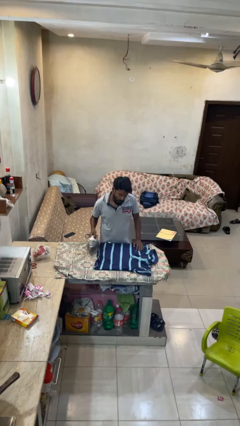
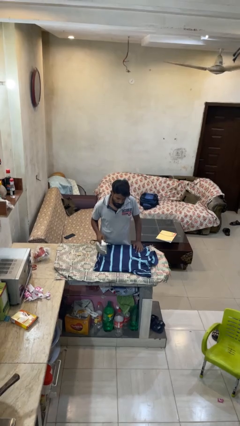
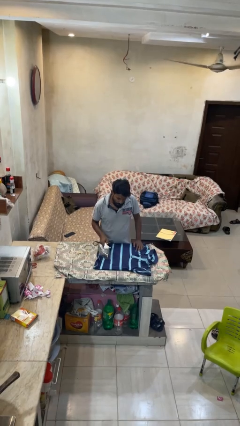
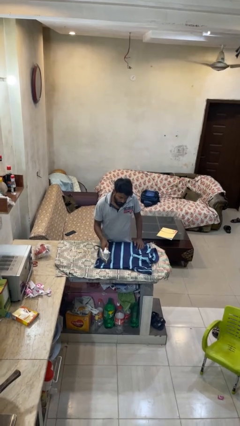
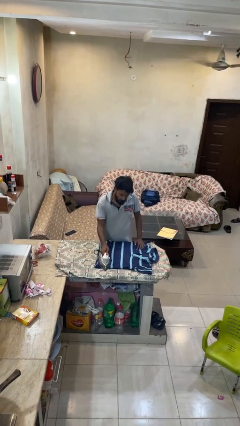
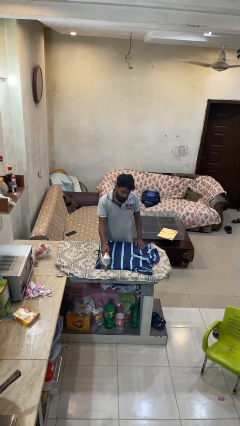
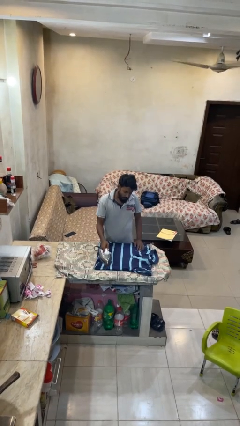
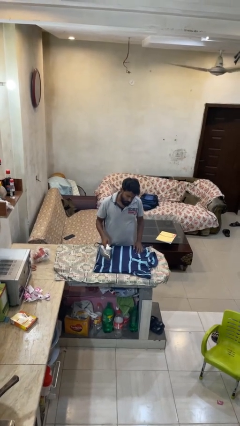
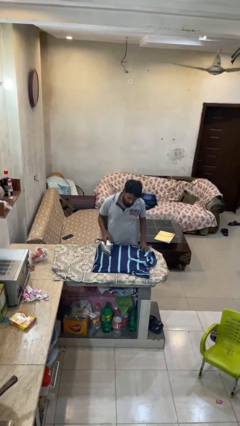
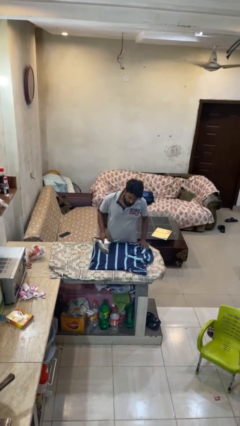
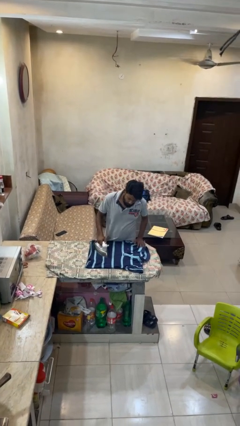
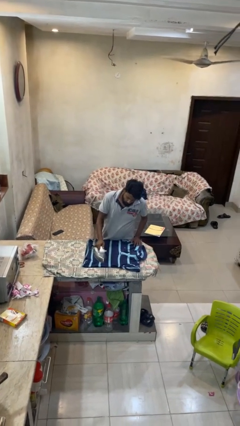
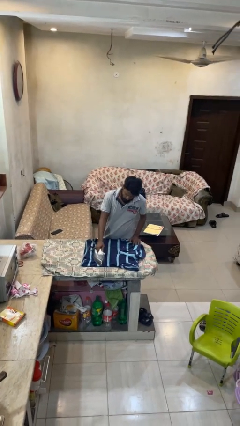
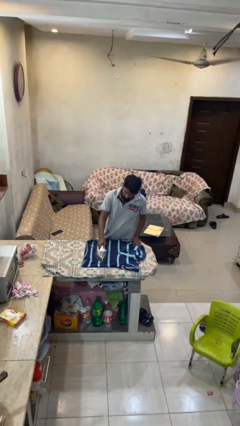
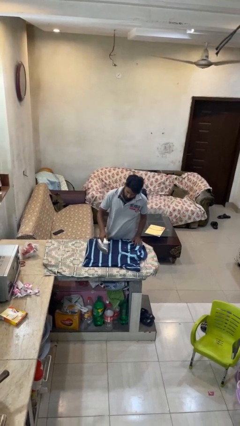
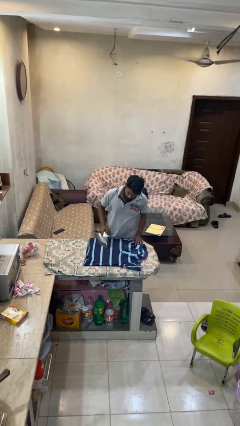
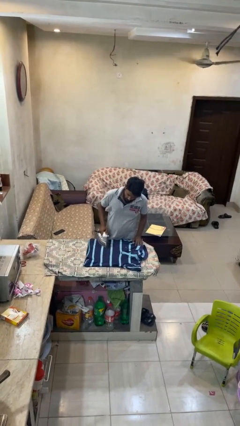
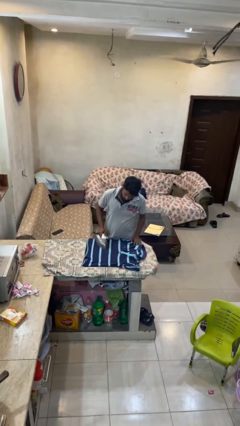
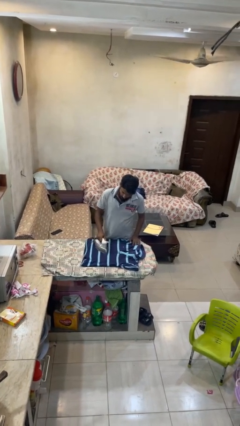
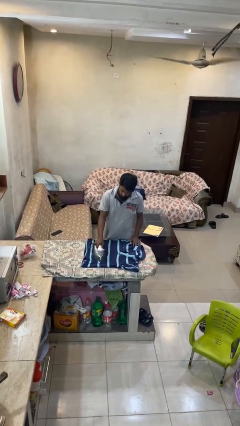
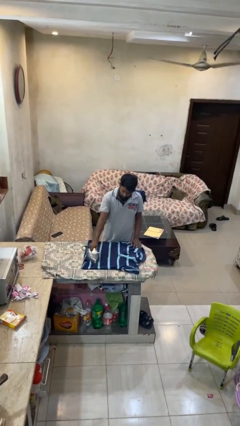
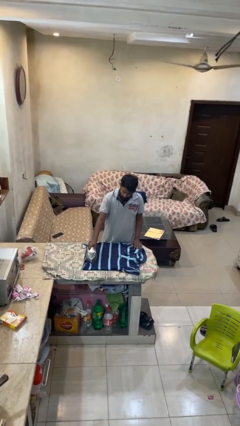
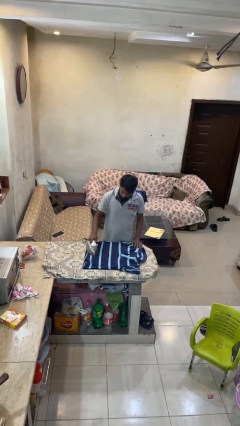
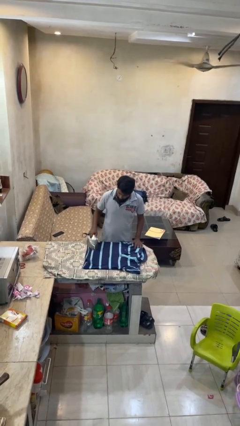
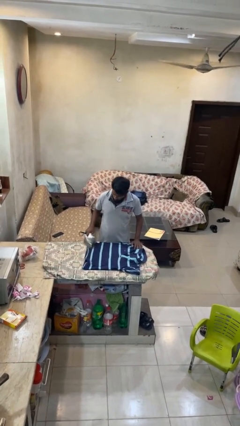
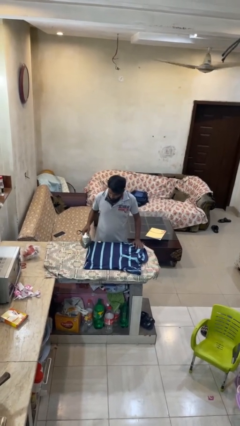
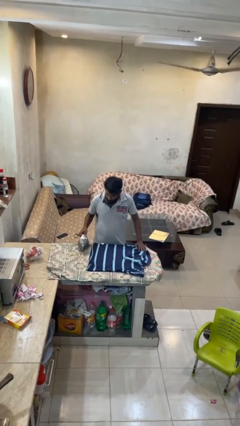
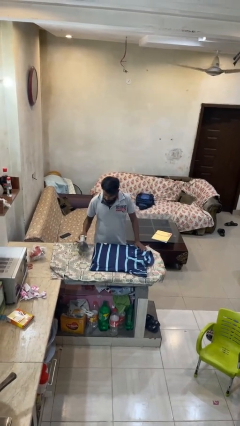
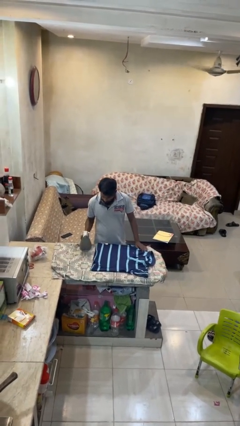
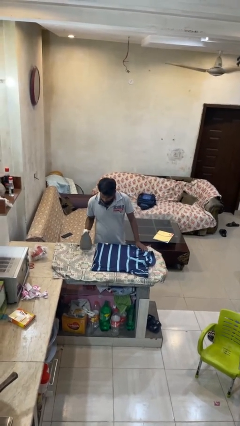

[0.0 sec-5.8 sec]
person irons clothes

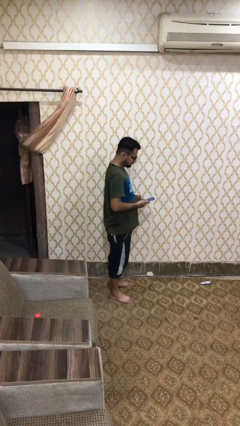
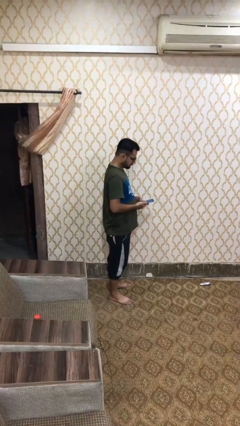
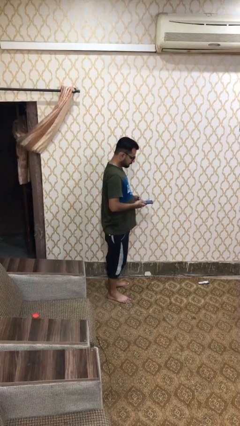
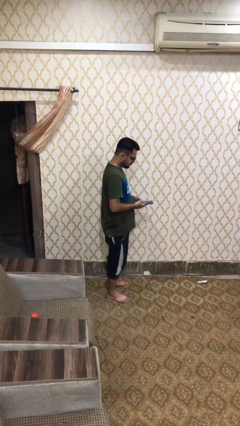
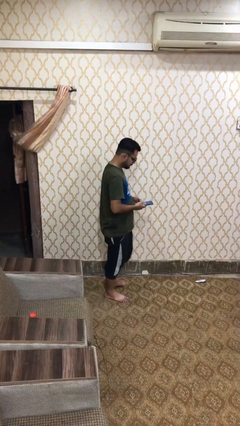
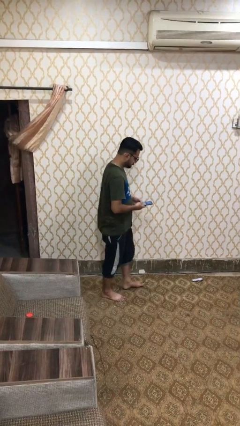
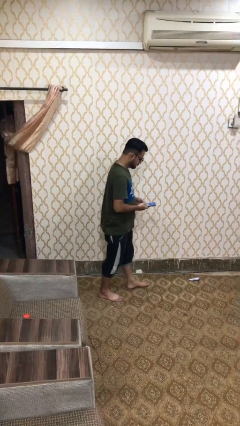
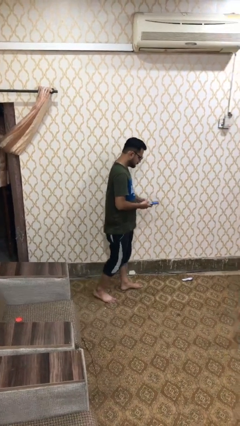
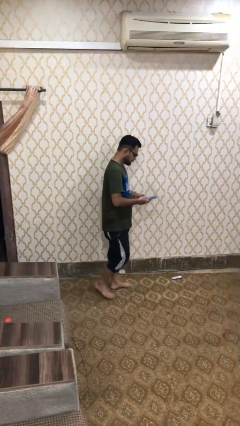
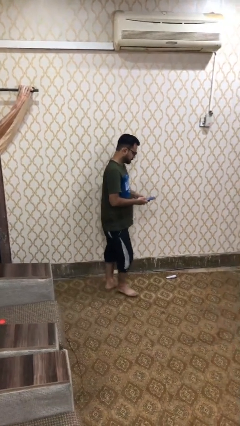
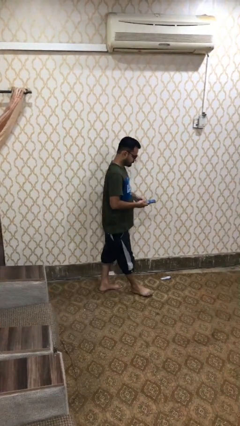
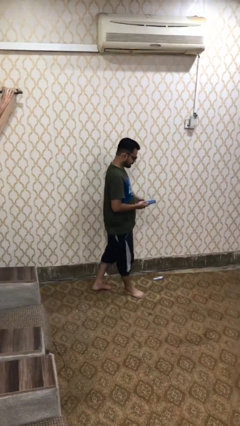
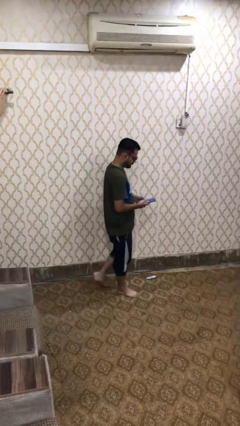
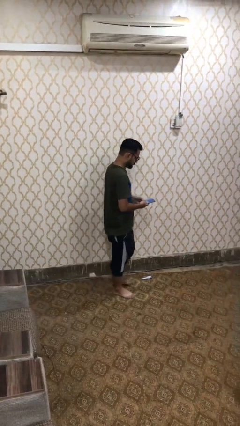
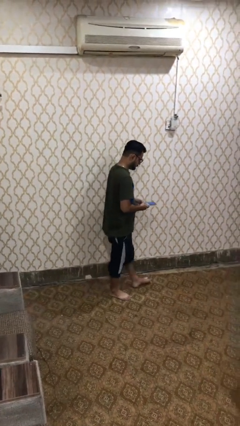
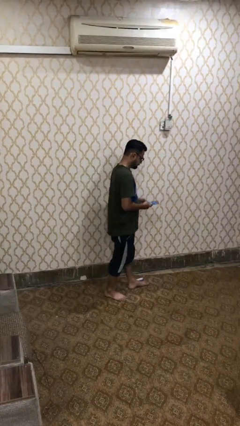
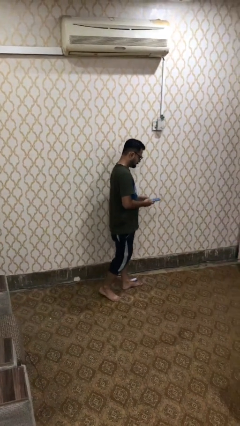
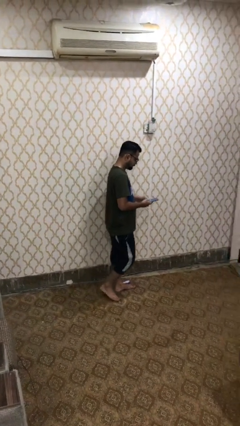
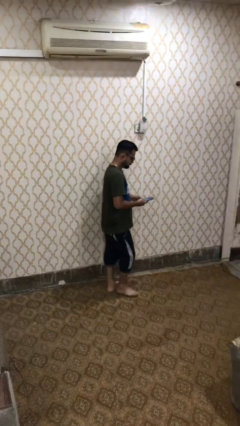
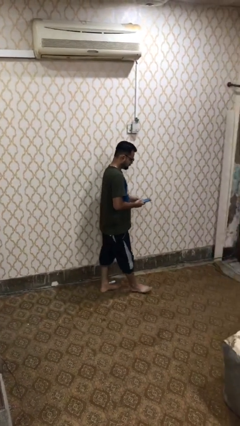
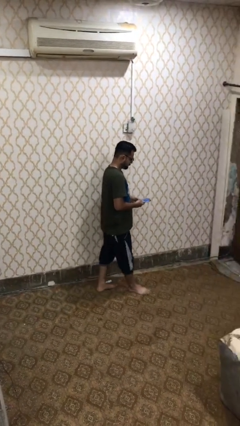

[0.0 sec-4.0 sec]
person texts on phone

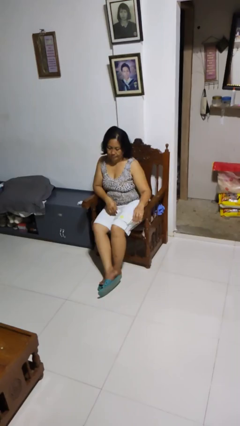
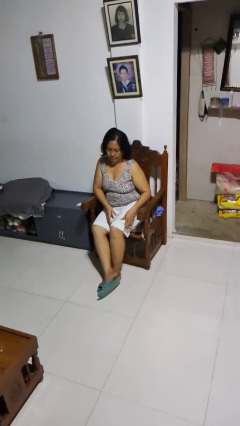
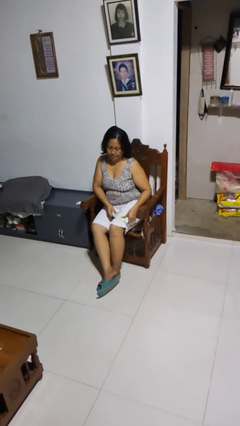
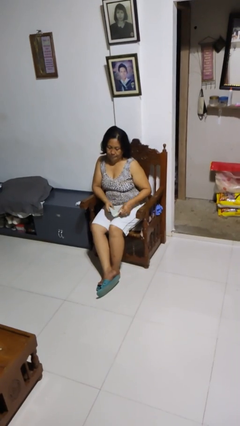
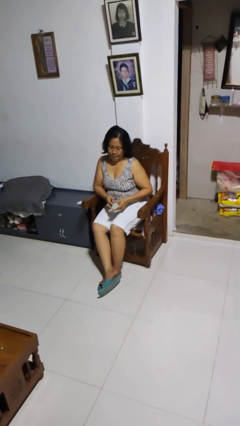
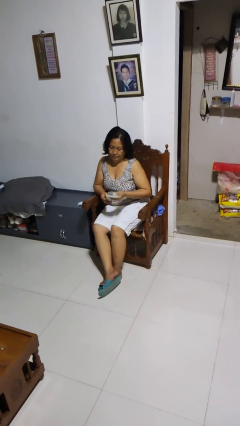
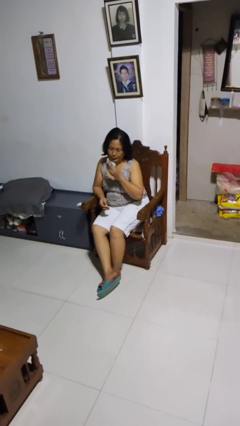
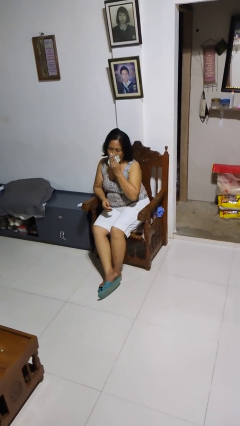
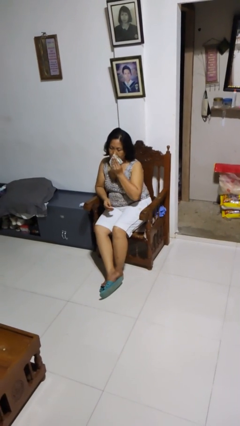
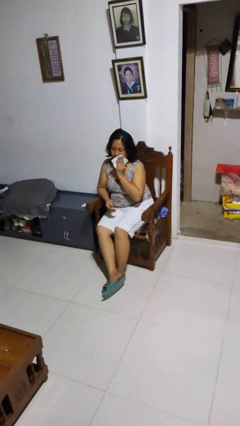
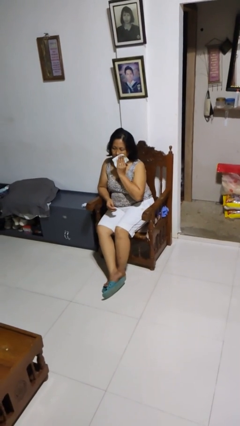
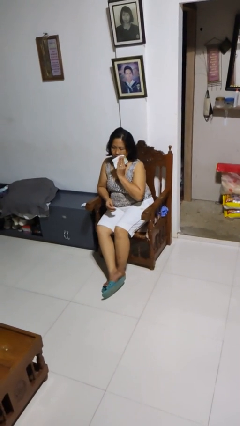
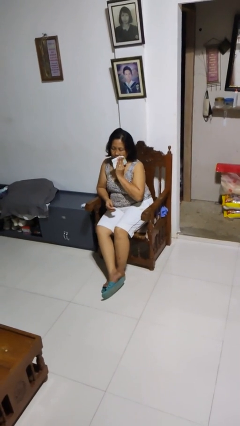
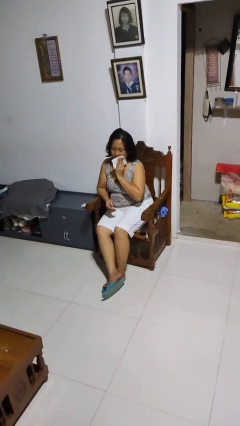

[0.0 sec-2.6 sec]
person wipes mouth with napkin

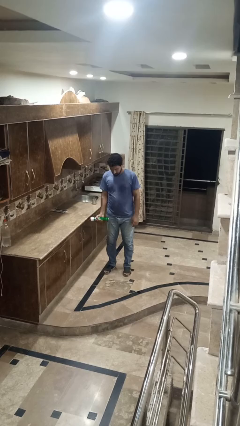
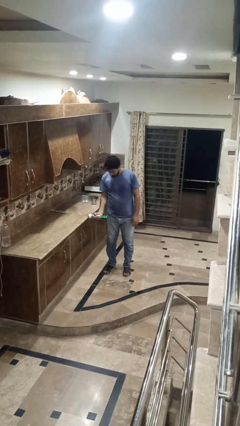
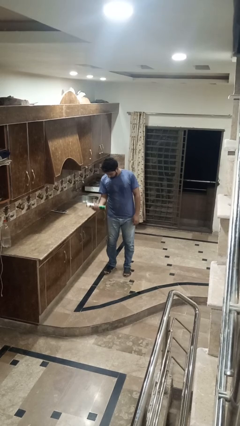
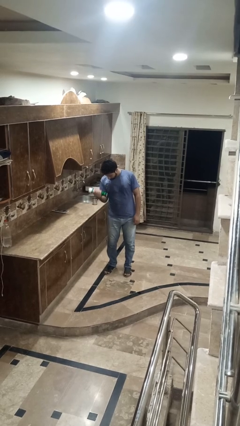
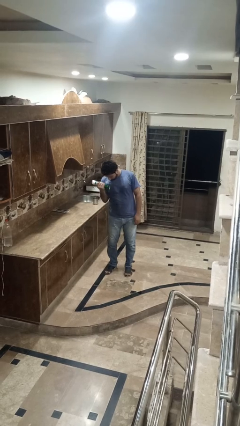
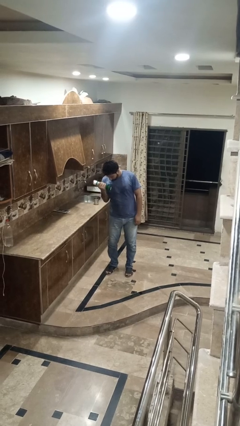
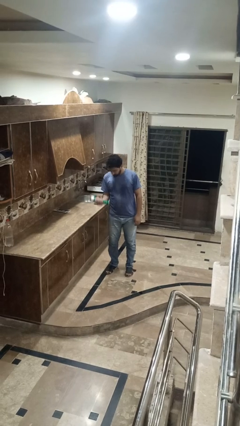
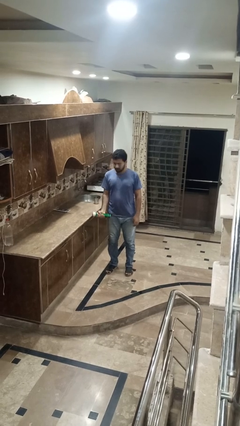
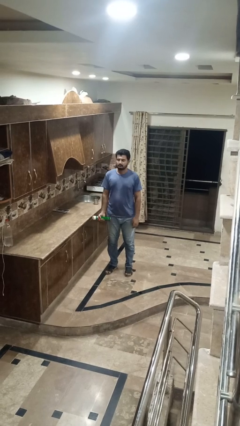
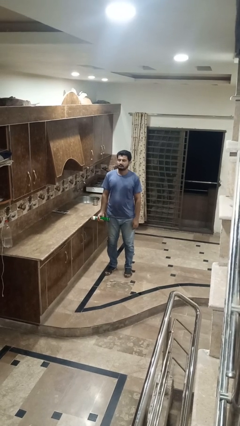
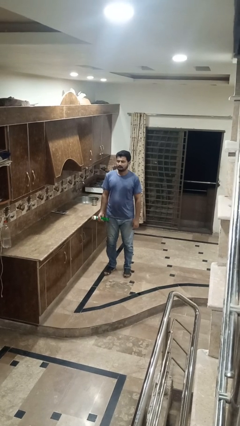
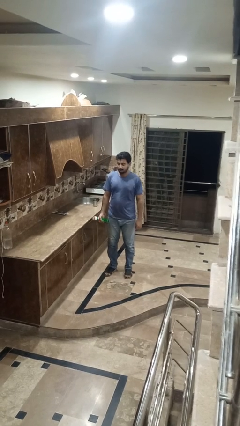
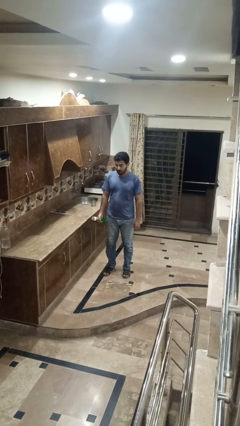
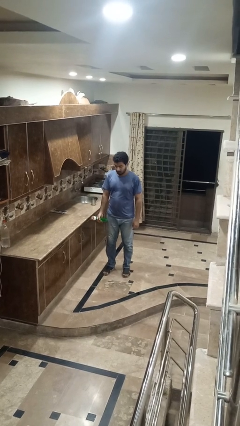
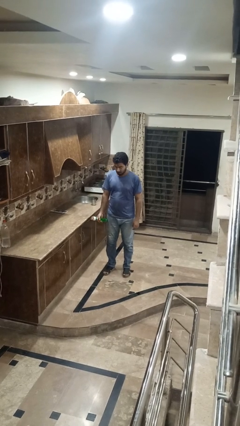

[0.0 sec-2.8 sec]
person lifts dumbbells

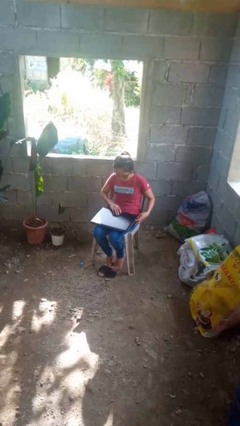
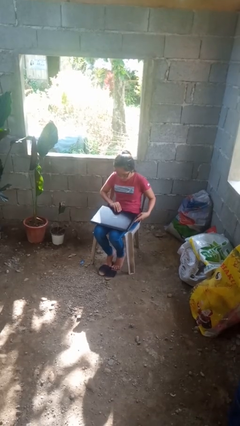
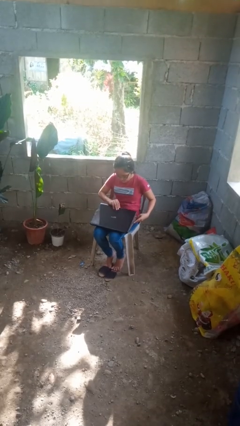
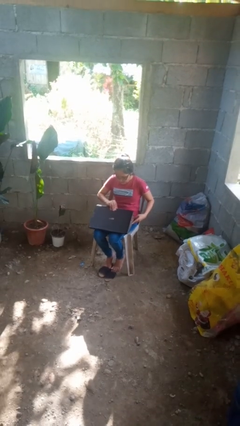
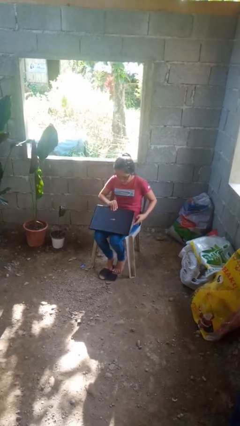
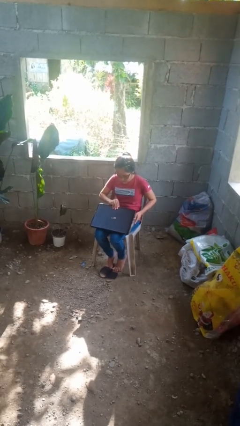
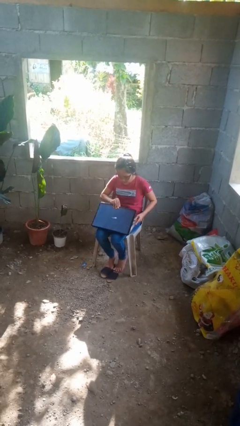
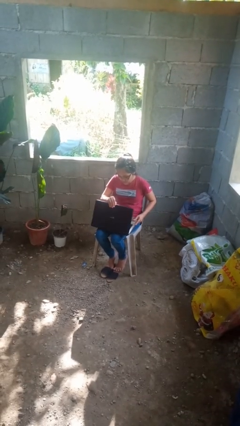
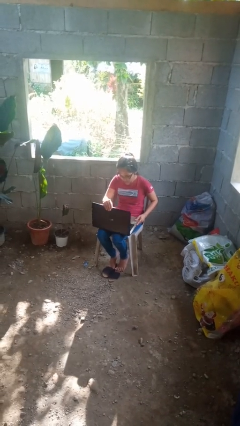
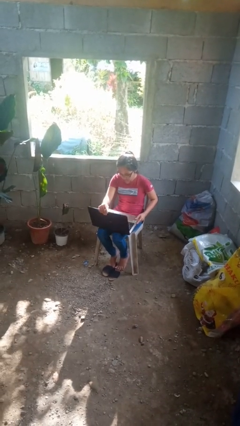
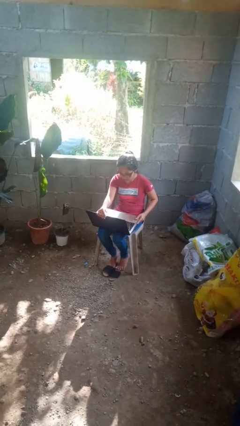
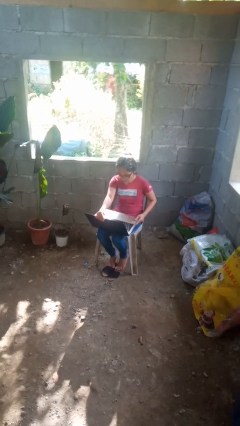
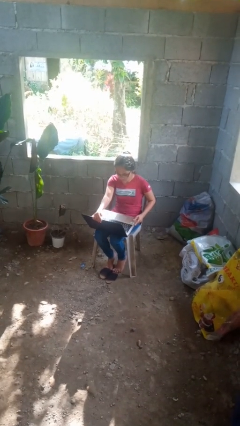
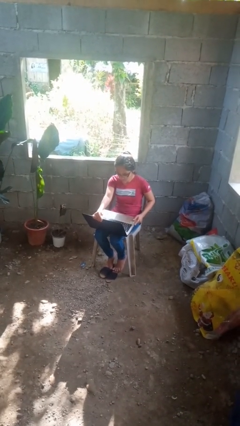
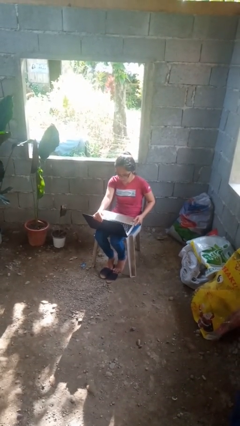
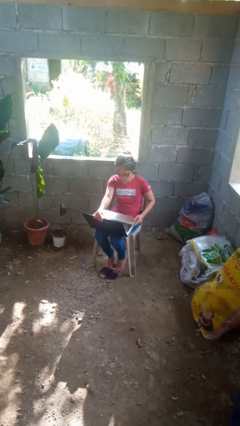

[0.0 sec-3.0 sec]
person opens laptop
